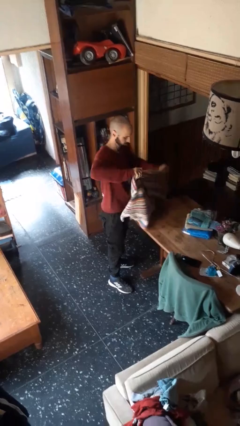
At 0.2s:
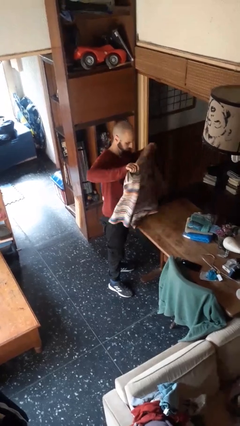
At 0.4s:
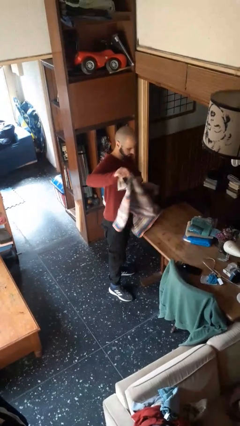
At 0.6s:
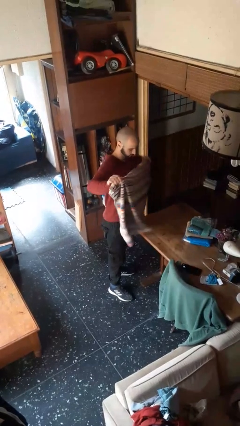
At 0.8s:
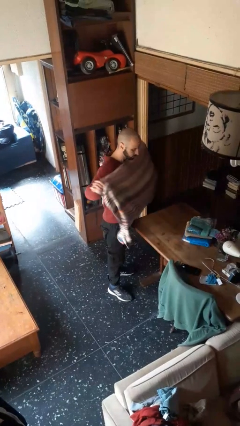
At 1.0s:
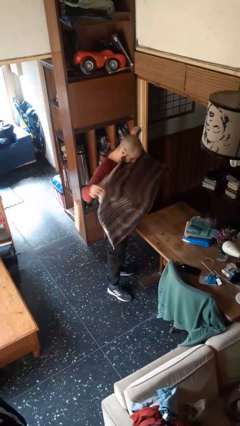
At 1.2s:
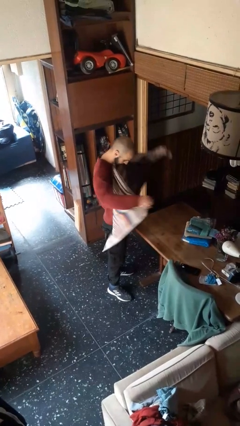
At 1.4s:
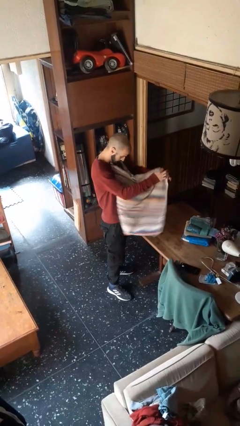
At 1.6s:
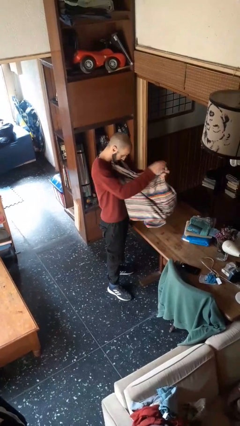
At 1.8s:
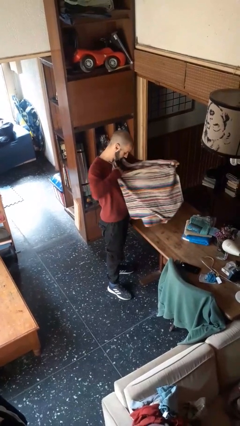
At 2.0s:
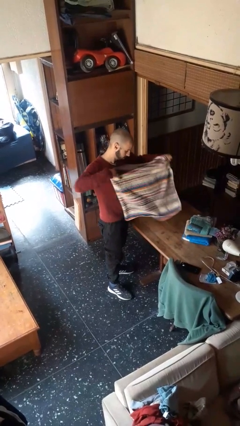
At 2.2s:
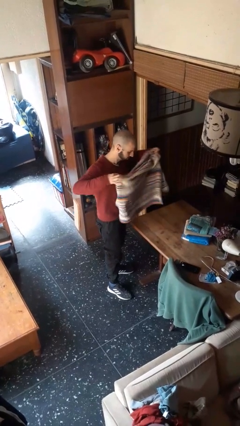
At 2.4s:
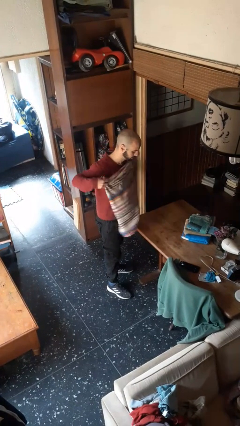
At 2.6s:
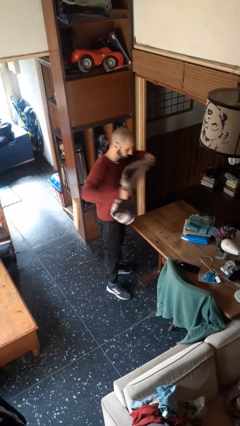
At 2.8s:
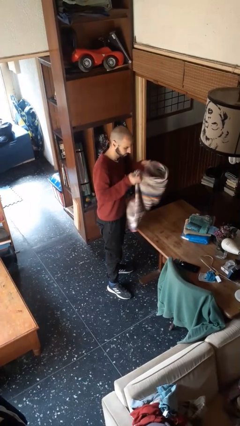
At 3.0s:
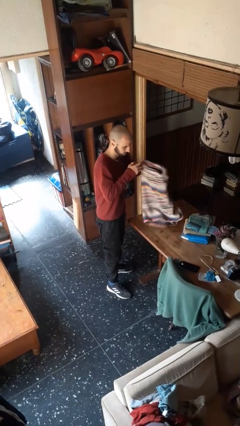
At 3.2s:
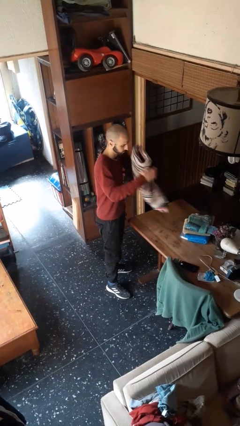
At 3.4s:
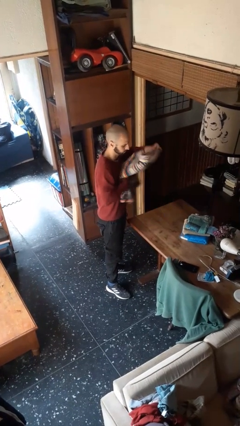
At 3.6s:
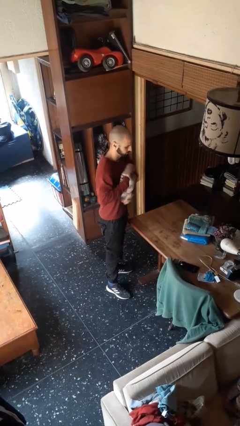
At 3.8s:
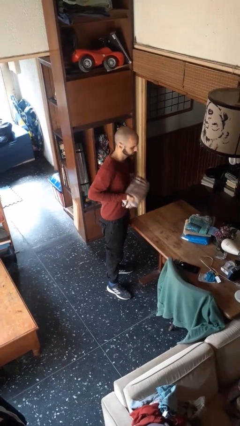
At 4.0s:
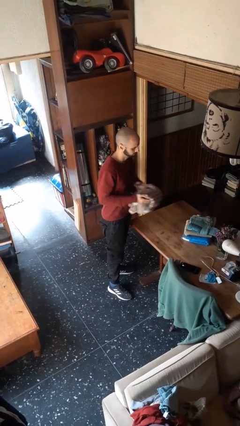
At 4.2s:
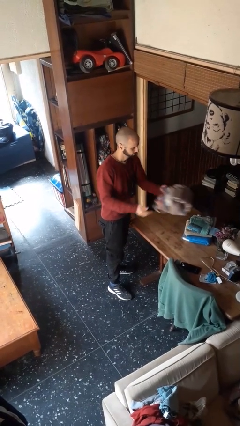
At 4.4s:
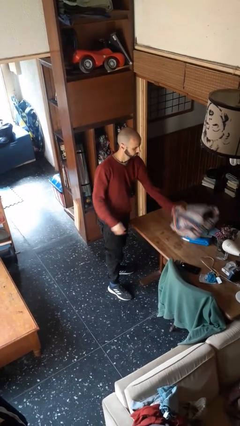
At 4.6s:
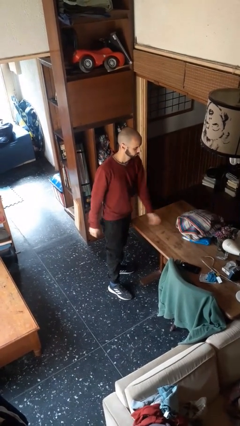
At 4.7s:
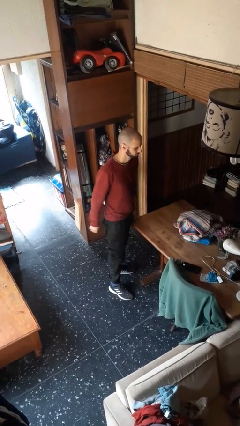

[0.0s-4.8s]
person folds towel

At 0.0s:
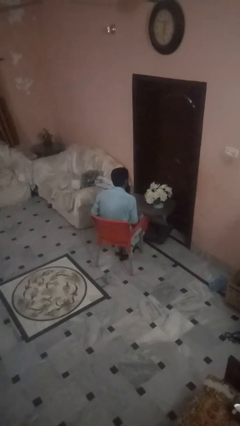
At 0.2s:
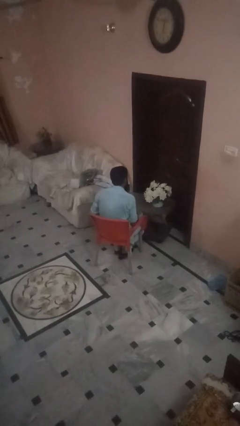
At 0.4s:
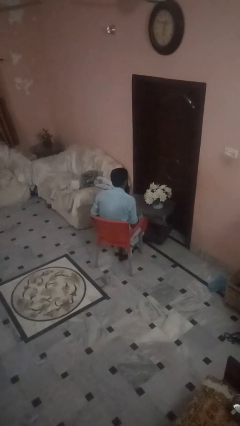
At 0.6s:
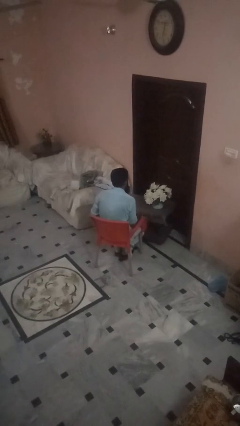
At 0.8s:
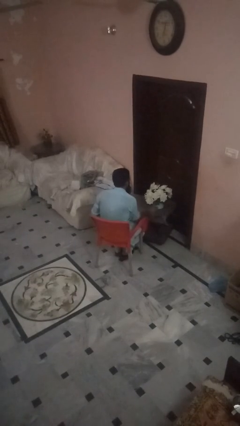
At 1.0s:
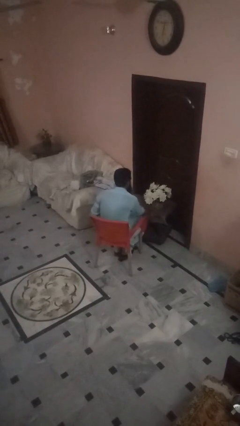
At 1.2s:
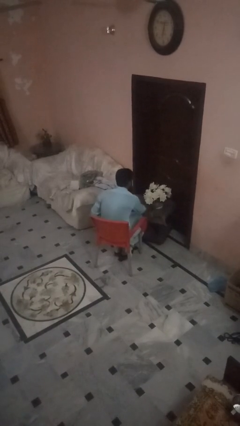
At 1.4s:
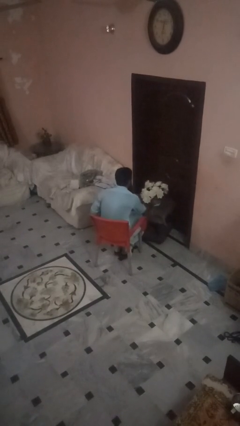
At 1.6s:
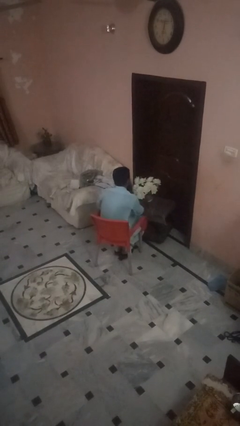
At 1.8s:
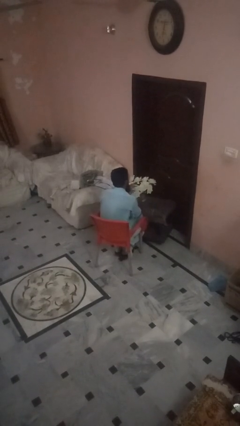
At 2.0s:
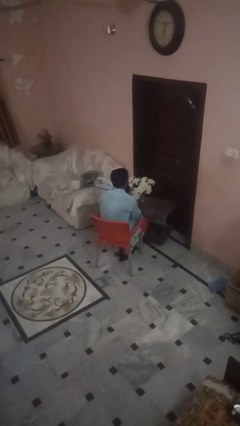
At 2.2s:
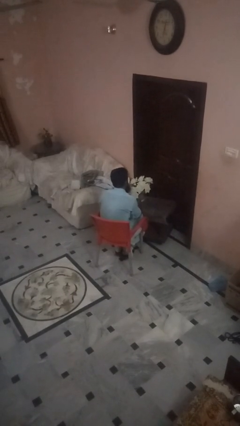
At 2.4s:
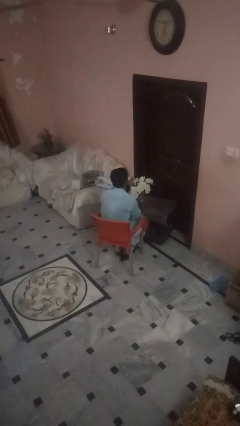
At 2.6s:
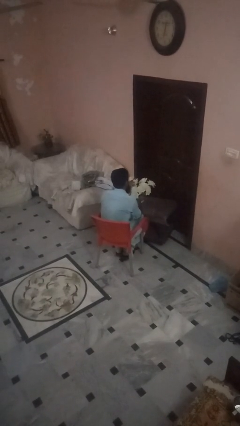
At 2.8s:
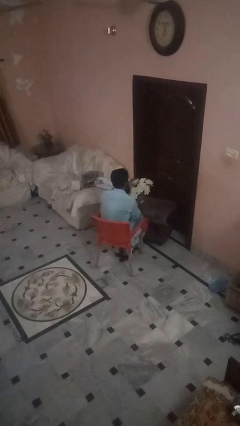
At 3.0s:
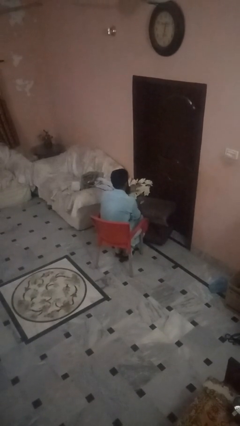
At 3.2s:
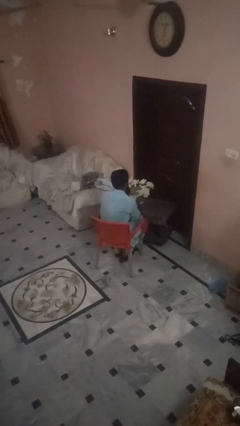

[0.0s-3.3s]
person arranges flowers in vase

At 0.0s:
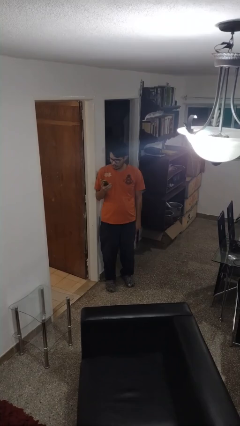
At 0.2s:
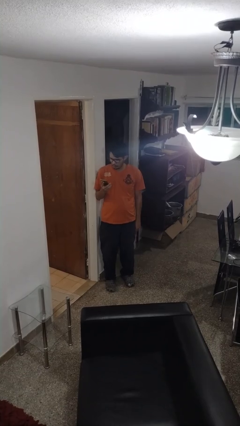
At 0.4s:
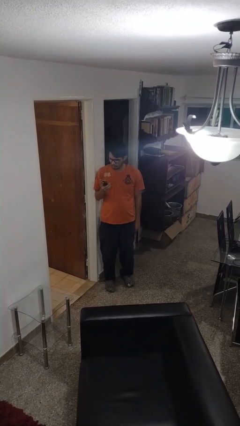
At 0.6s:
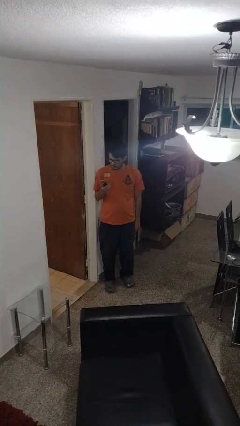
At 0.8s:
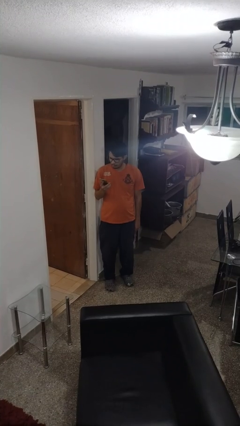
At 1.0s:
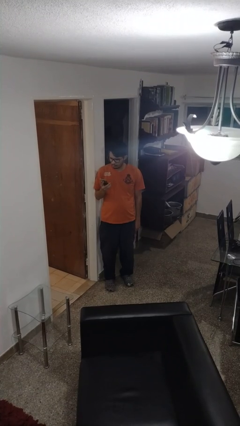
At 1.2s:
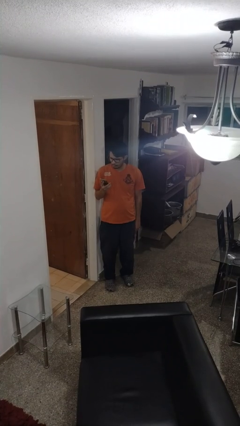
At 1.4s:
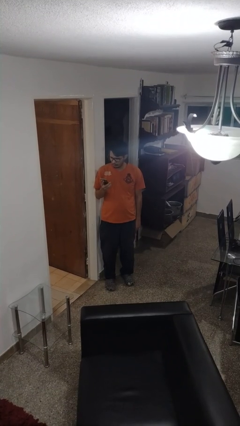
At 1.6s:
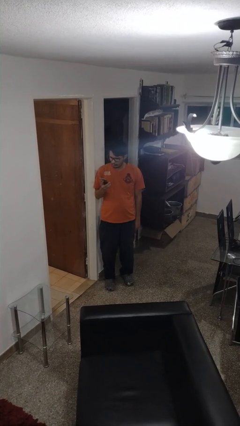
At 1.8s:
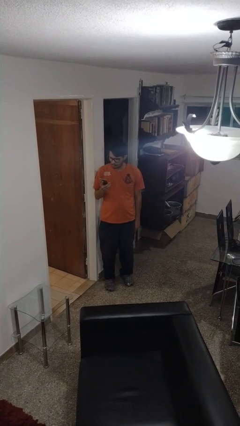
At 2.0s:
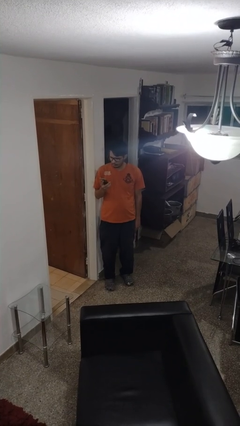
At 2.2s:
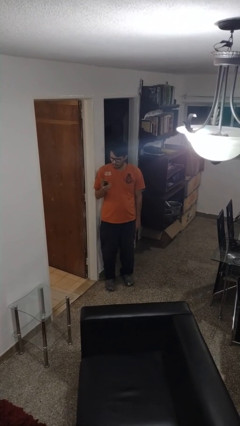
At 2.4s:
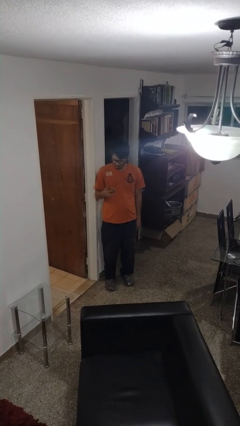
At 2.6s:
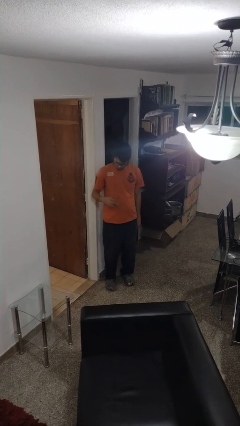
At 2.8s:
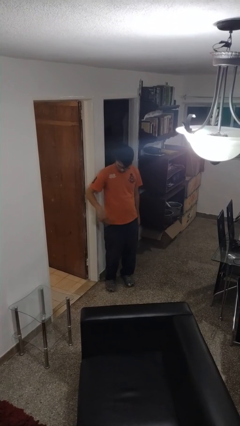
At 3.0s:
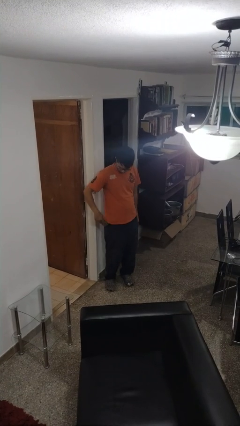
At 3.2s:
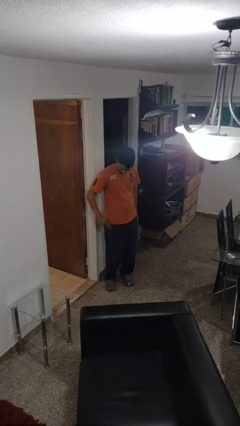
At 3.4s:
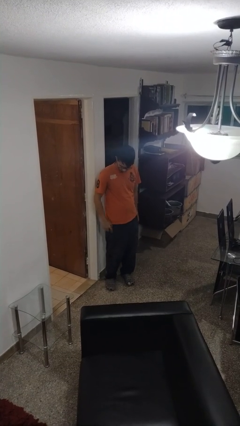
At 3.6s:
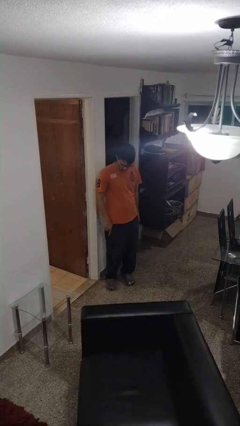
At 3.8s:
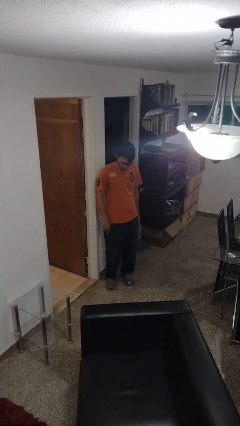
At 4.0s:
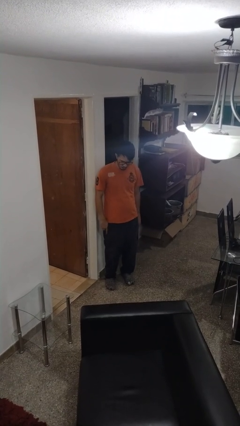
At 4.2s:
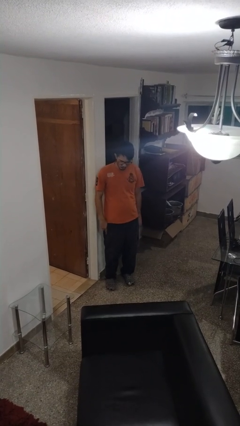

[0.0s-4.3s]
person puts phone into pocket

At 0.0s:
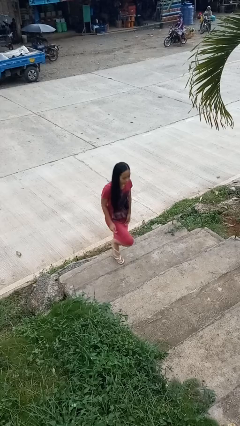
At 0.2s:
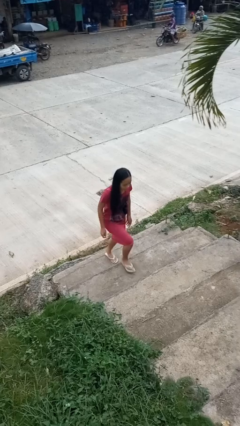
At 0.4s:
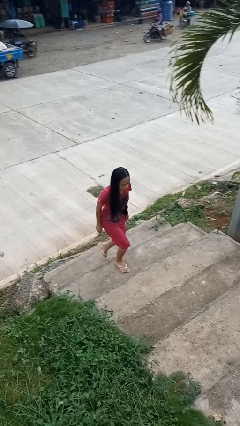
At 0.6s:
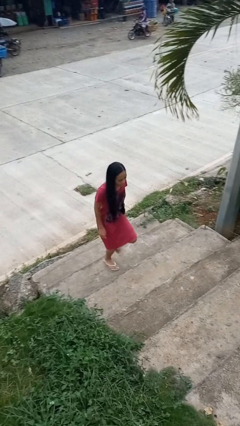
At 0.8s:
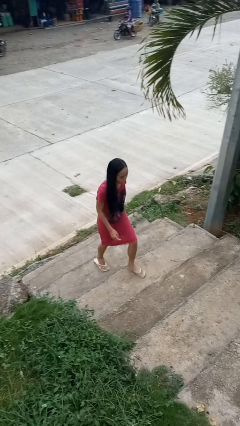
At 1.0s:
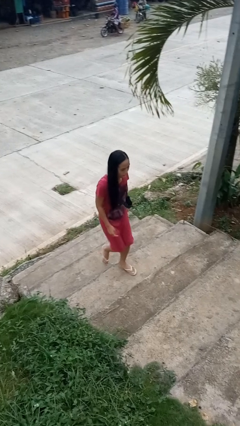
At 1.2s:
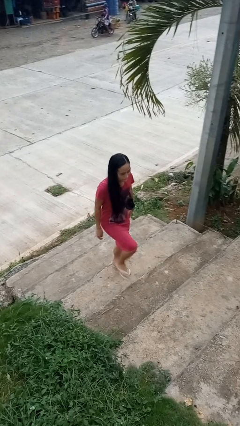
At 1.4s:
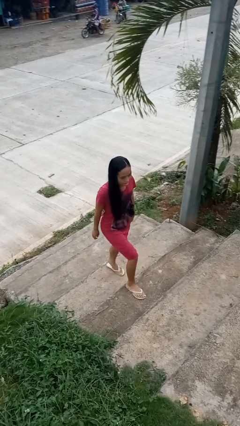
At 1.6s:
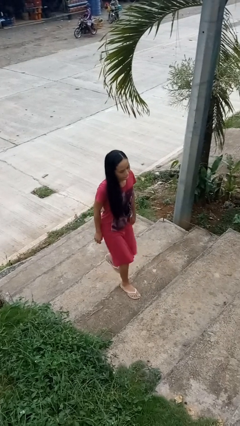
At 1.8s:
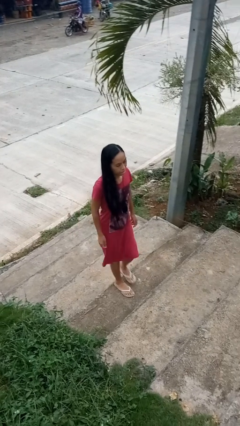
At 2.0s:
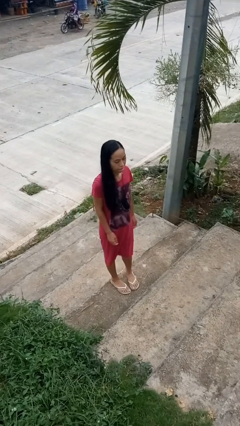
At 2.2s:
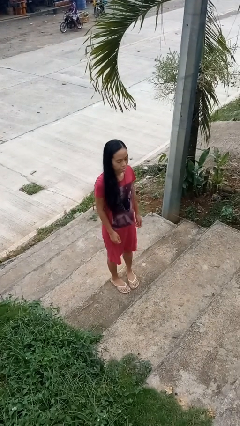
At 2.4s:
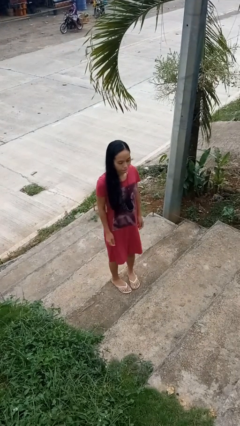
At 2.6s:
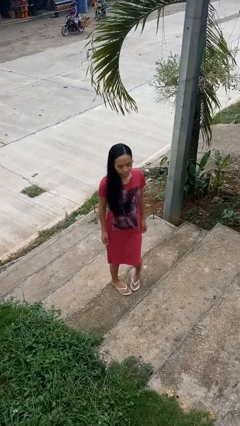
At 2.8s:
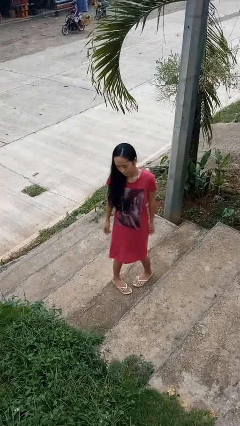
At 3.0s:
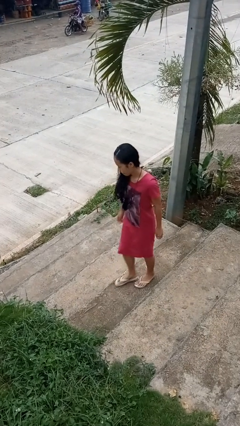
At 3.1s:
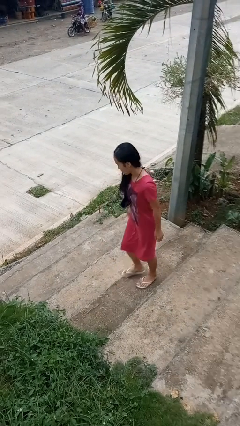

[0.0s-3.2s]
person climbs up stairs

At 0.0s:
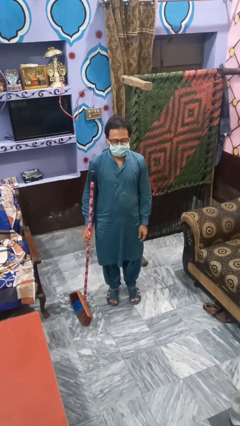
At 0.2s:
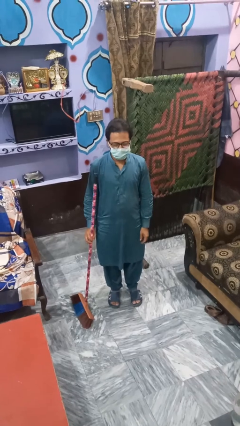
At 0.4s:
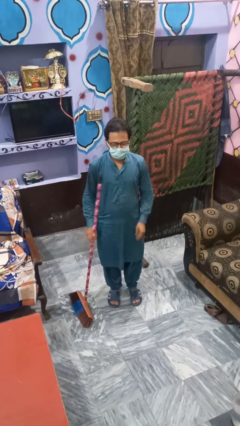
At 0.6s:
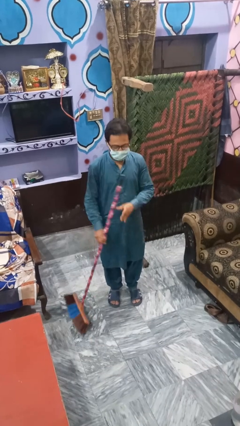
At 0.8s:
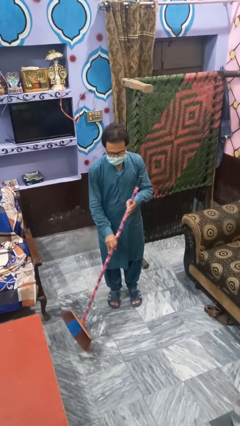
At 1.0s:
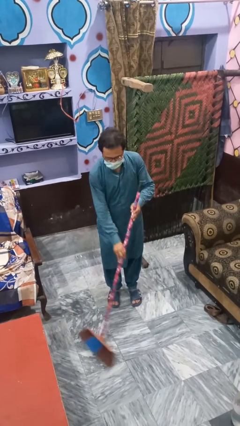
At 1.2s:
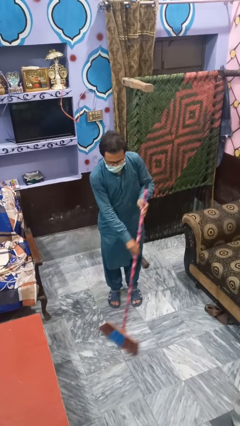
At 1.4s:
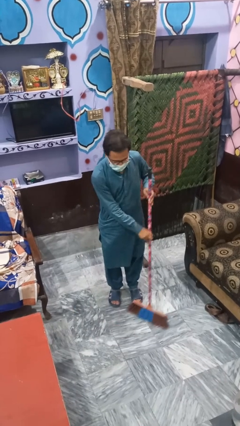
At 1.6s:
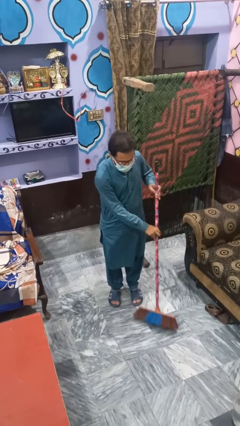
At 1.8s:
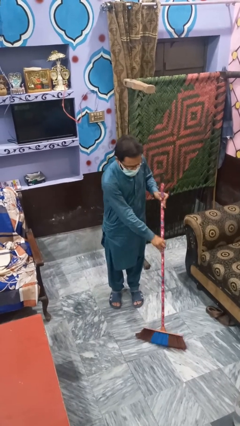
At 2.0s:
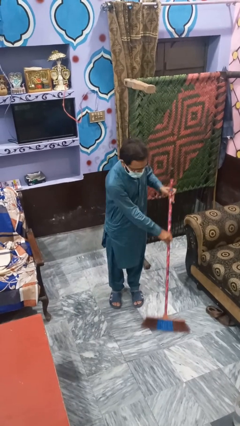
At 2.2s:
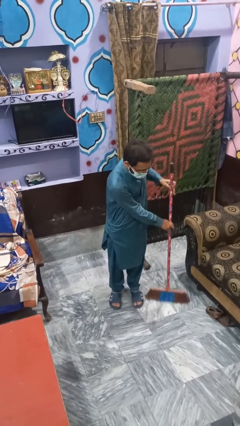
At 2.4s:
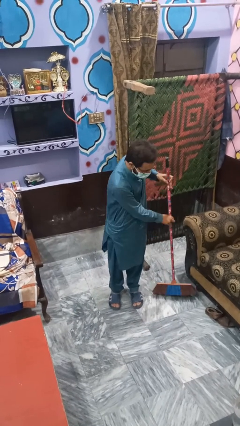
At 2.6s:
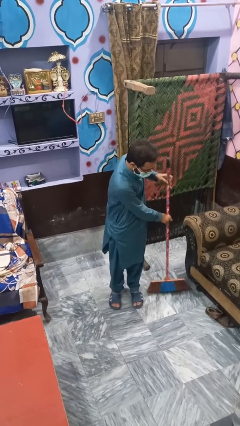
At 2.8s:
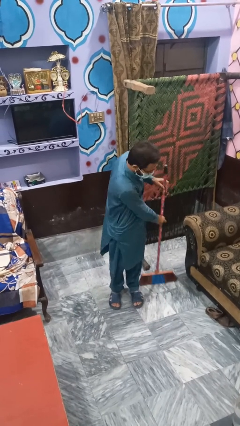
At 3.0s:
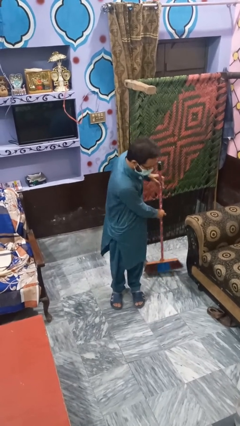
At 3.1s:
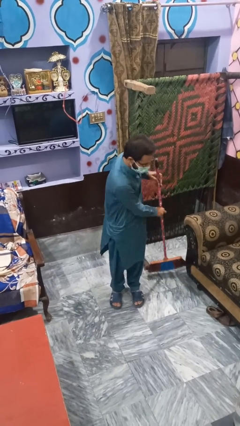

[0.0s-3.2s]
person mops
